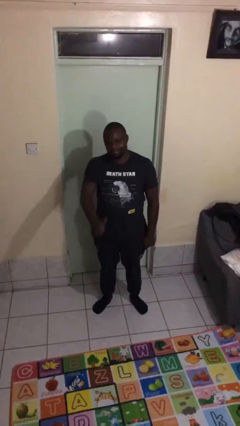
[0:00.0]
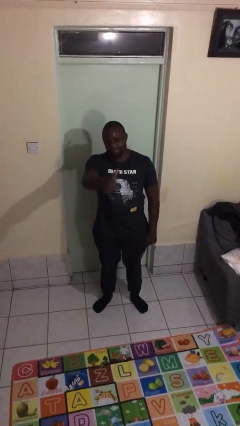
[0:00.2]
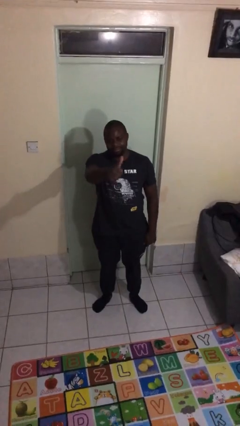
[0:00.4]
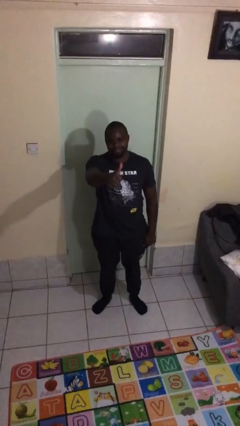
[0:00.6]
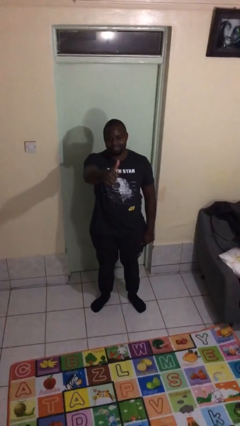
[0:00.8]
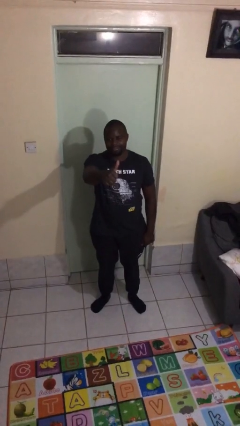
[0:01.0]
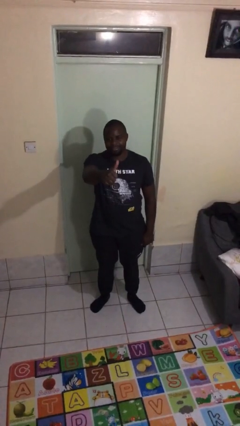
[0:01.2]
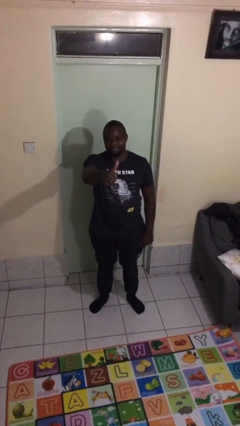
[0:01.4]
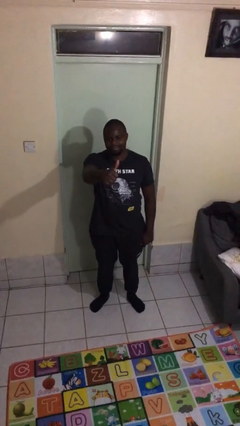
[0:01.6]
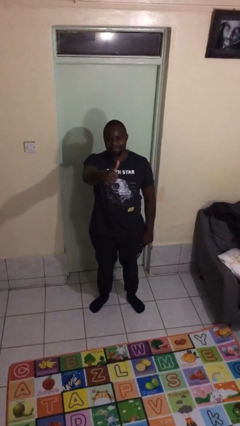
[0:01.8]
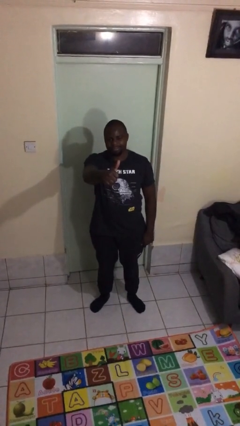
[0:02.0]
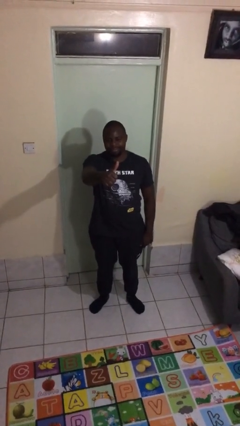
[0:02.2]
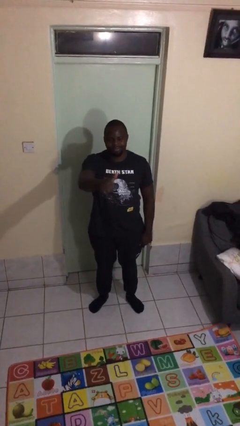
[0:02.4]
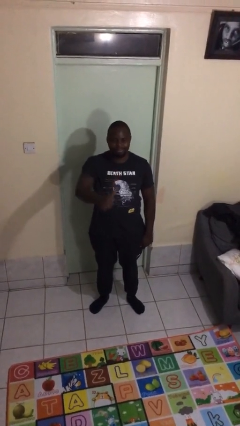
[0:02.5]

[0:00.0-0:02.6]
person gestures thumbs up

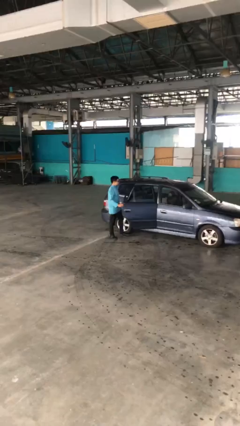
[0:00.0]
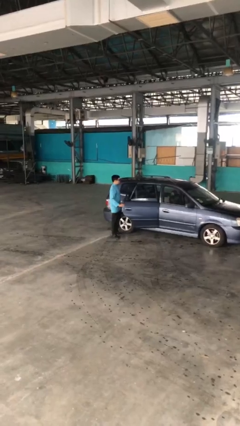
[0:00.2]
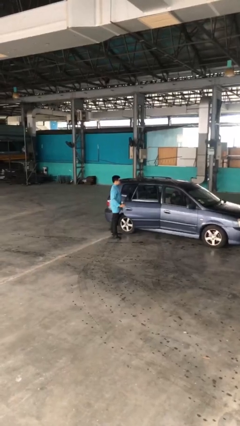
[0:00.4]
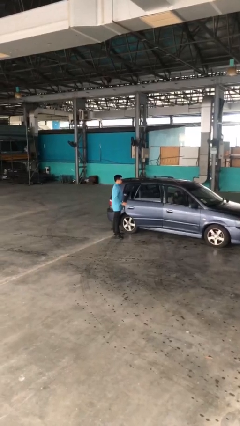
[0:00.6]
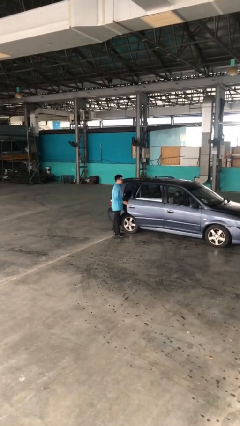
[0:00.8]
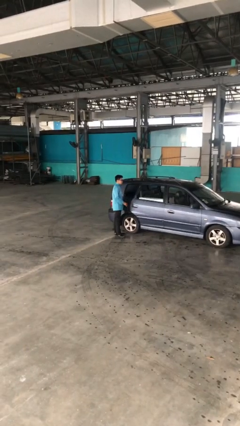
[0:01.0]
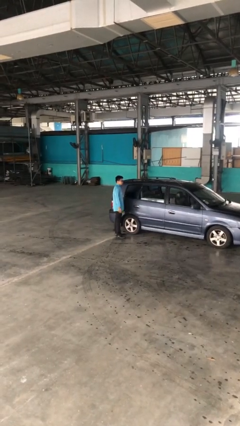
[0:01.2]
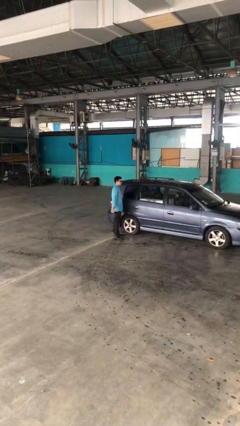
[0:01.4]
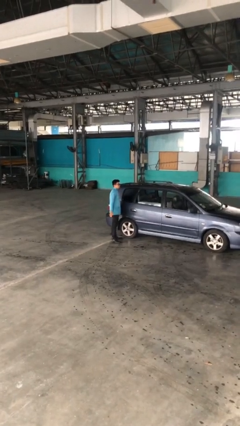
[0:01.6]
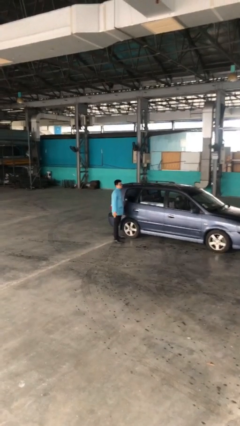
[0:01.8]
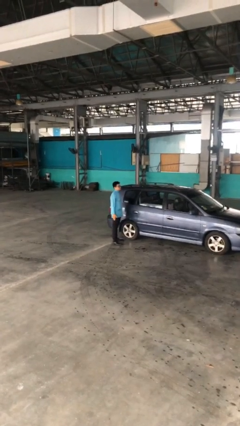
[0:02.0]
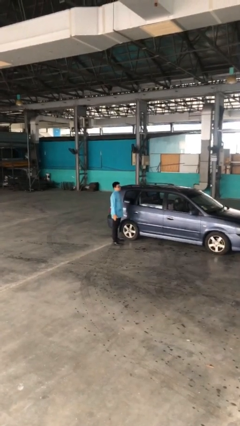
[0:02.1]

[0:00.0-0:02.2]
person closes car door

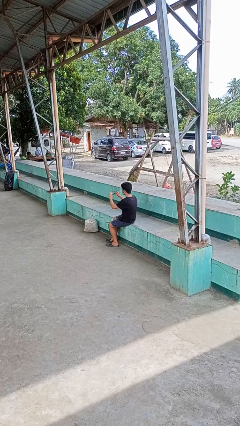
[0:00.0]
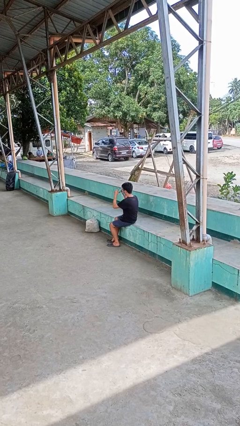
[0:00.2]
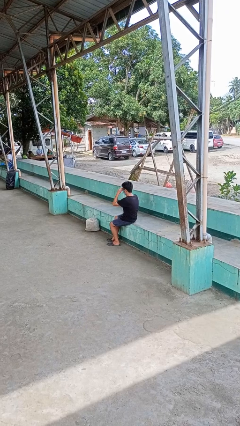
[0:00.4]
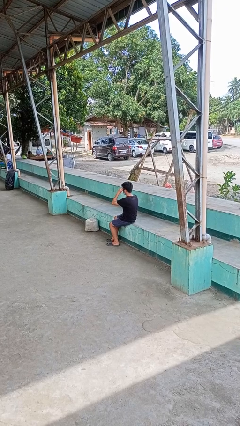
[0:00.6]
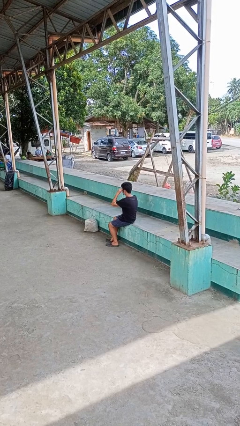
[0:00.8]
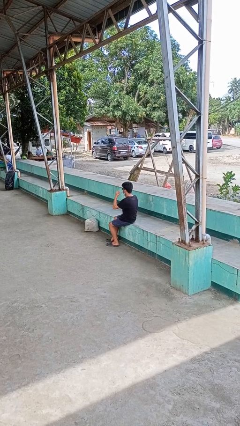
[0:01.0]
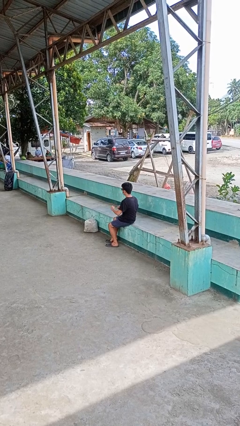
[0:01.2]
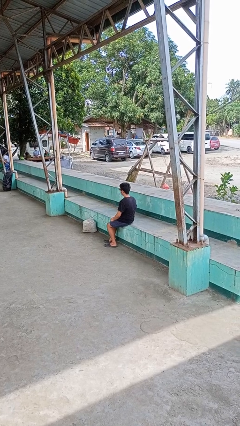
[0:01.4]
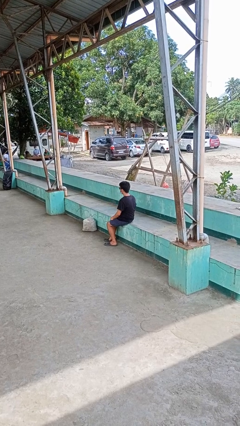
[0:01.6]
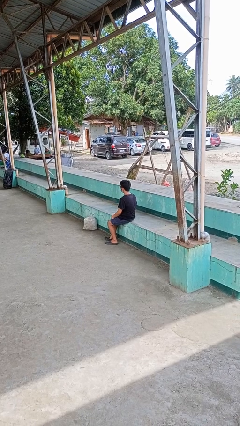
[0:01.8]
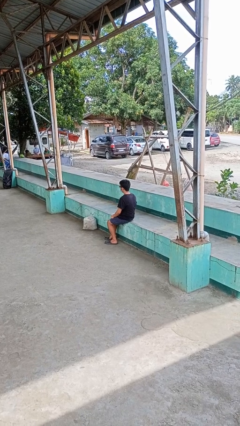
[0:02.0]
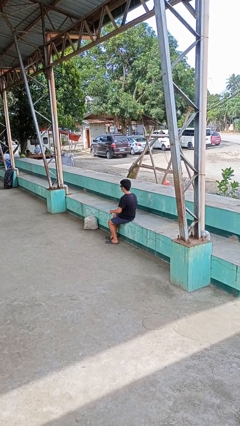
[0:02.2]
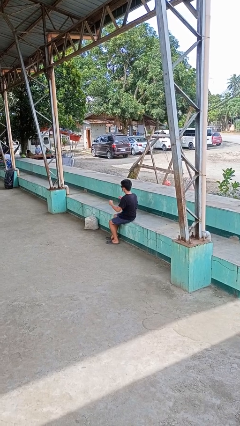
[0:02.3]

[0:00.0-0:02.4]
person puts on sunglasses

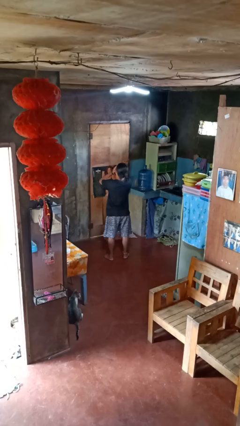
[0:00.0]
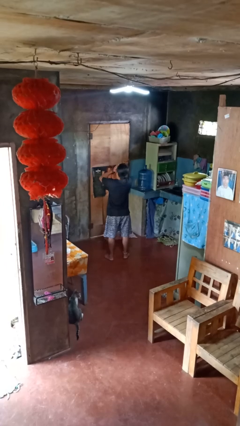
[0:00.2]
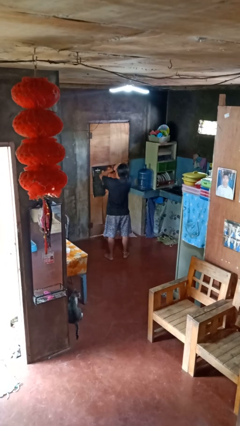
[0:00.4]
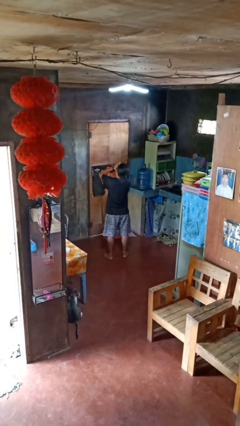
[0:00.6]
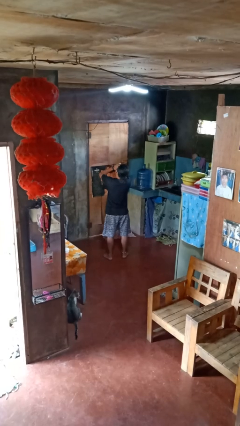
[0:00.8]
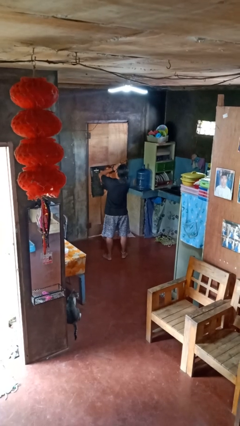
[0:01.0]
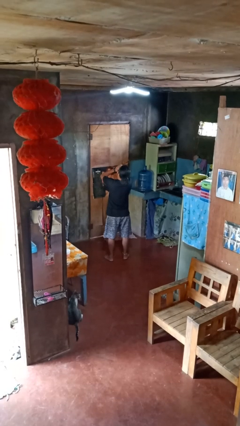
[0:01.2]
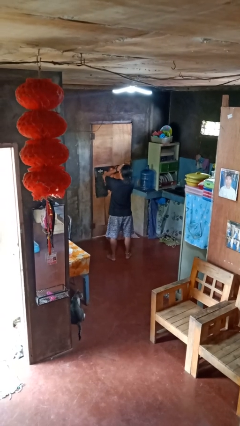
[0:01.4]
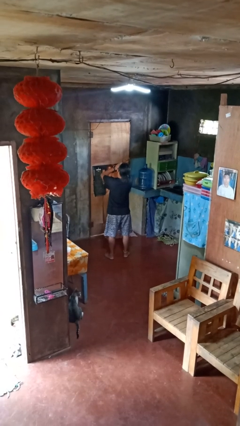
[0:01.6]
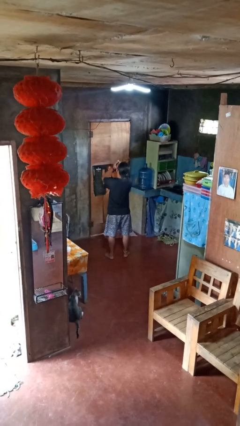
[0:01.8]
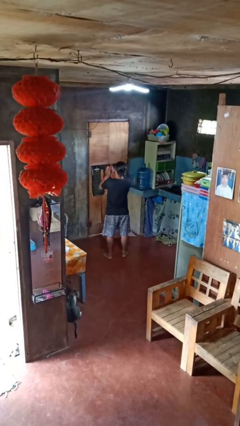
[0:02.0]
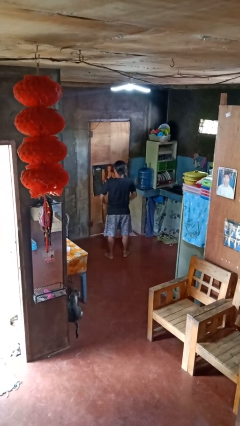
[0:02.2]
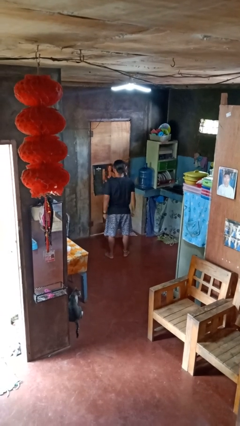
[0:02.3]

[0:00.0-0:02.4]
person yawns

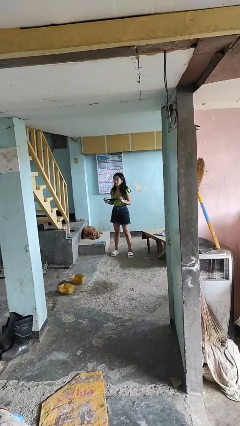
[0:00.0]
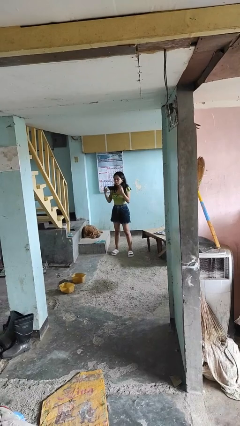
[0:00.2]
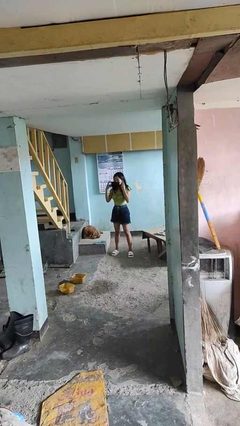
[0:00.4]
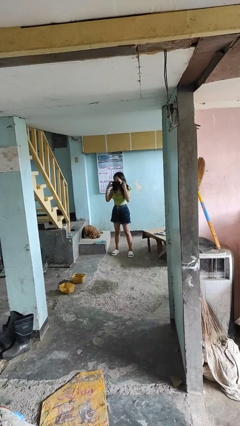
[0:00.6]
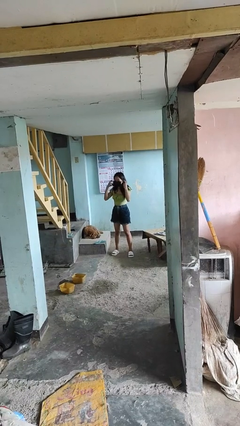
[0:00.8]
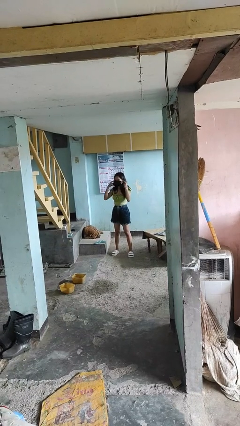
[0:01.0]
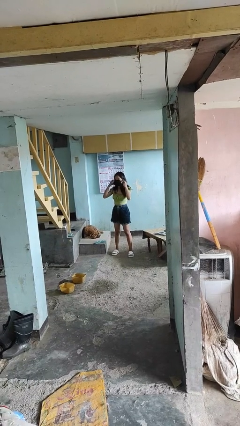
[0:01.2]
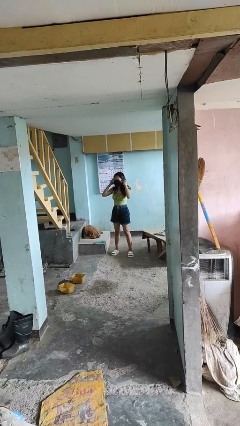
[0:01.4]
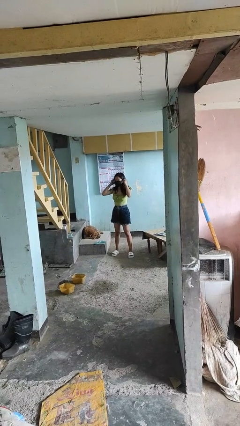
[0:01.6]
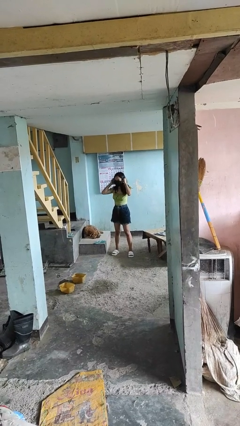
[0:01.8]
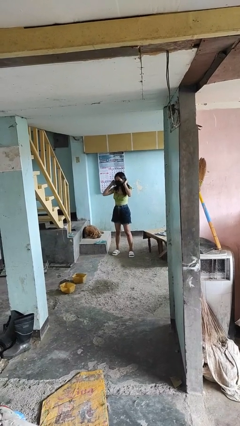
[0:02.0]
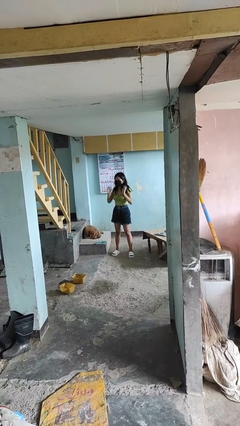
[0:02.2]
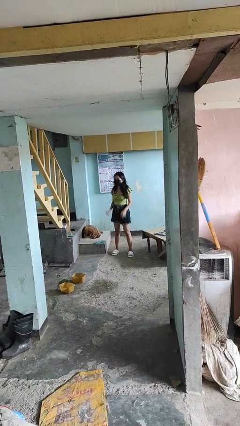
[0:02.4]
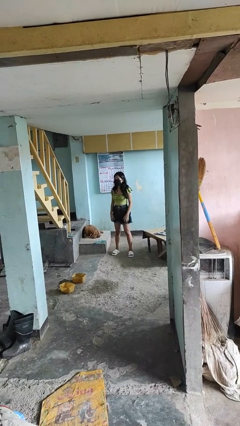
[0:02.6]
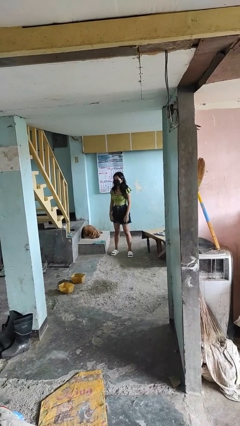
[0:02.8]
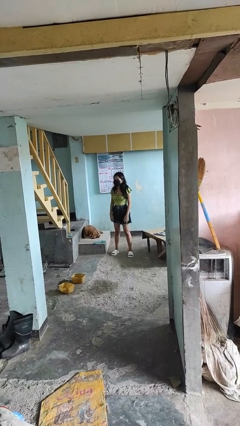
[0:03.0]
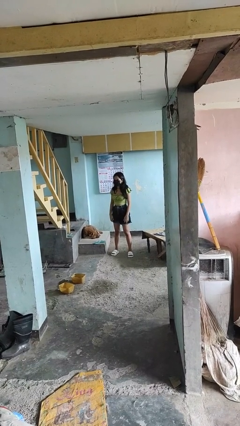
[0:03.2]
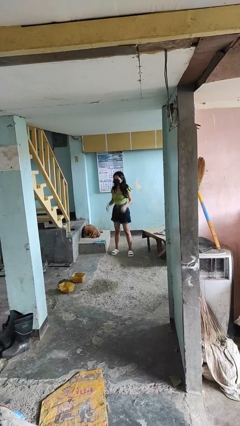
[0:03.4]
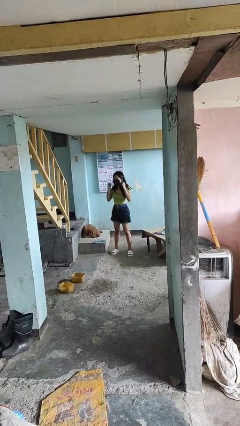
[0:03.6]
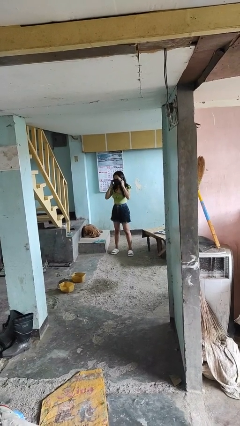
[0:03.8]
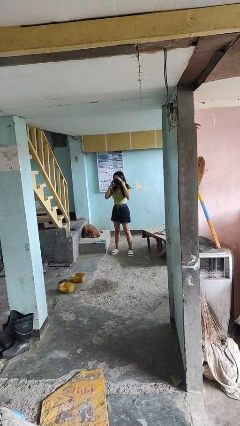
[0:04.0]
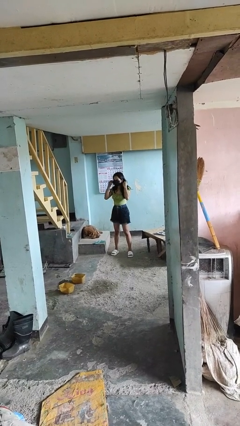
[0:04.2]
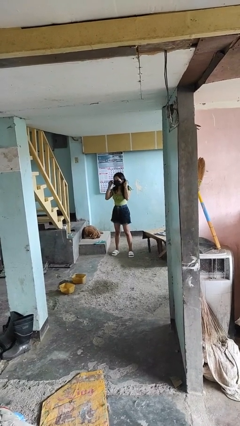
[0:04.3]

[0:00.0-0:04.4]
person puts on facemask

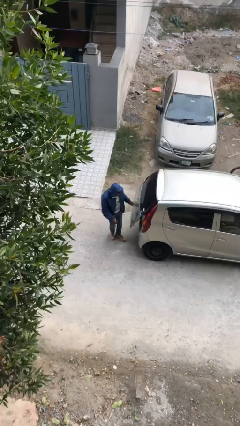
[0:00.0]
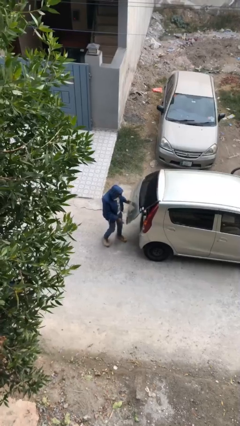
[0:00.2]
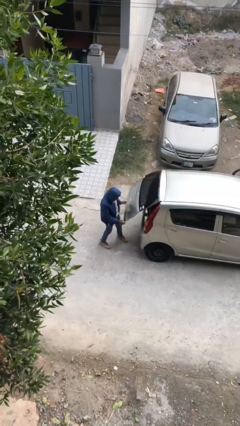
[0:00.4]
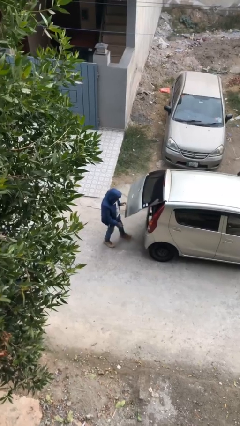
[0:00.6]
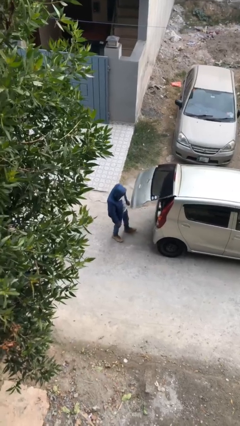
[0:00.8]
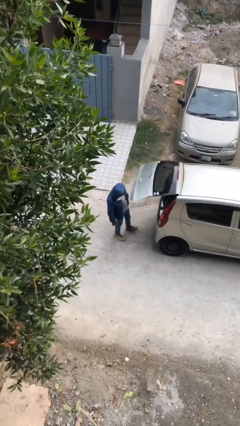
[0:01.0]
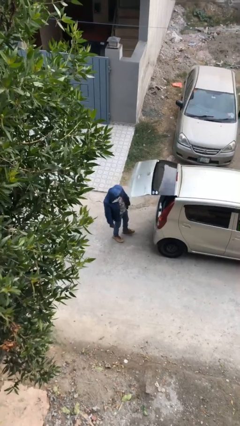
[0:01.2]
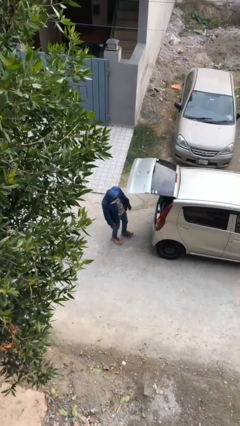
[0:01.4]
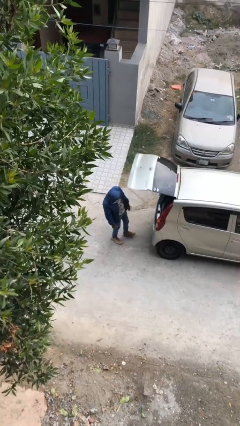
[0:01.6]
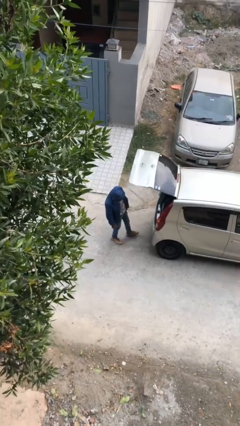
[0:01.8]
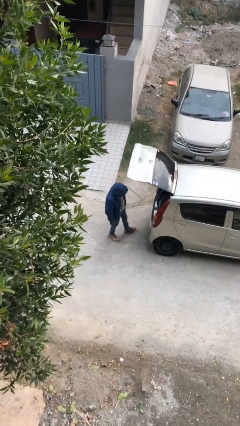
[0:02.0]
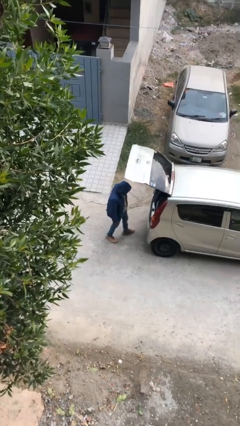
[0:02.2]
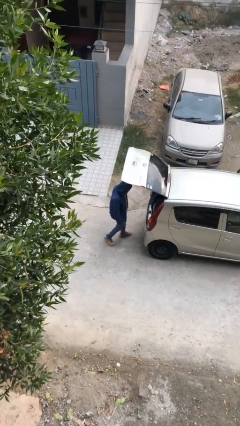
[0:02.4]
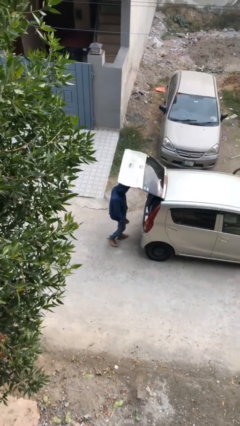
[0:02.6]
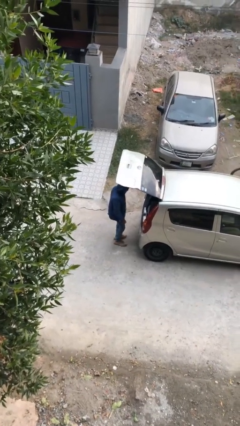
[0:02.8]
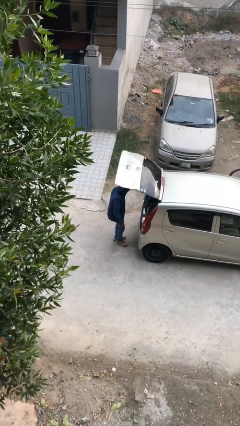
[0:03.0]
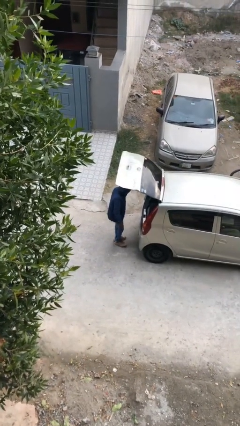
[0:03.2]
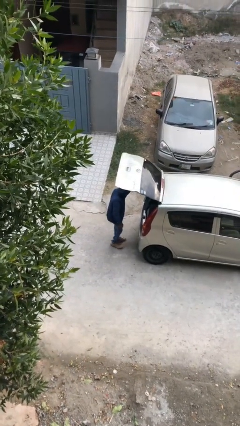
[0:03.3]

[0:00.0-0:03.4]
person opens car trunk
